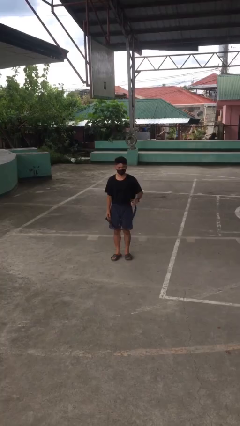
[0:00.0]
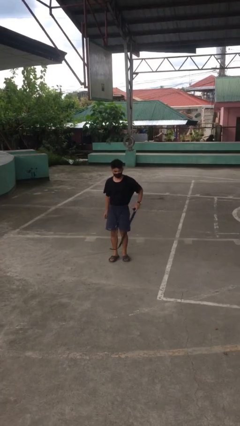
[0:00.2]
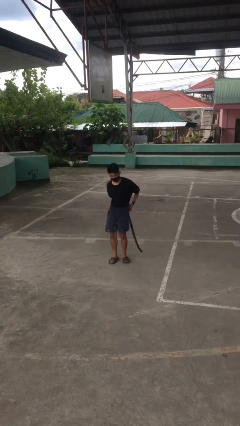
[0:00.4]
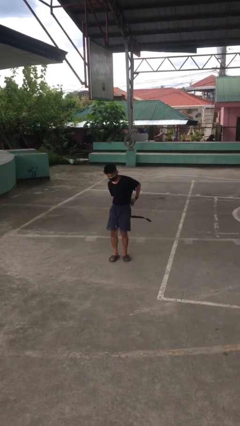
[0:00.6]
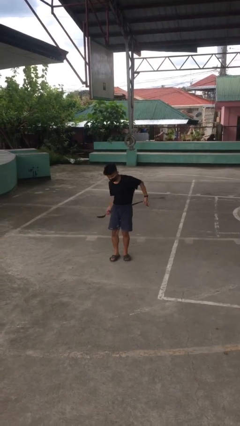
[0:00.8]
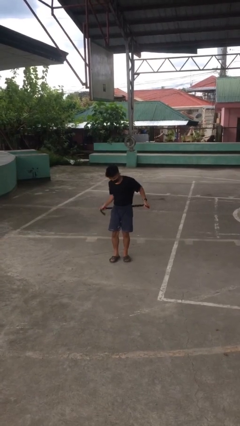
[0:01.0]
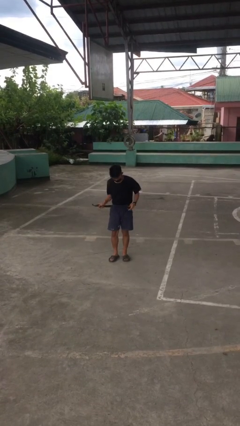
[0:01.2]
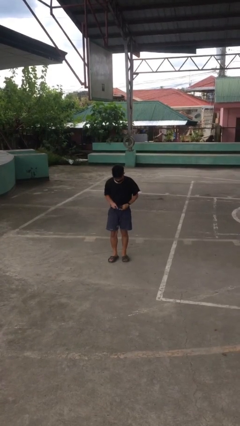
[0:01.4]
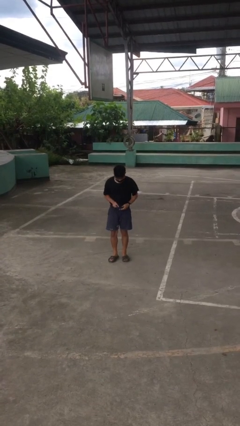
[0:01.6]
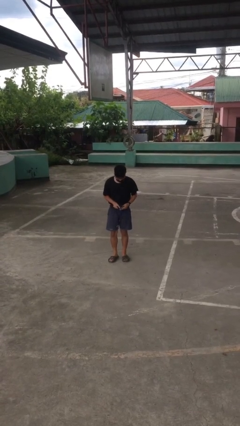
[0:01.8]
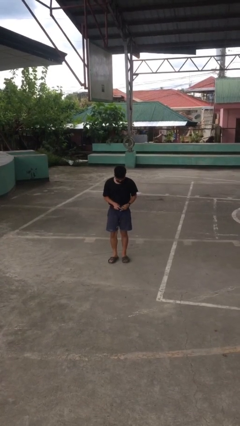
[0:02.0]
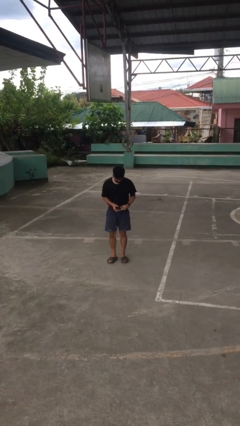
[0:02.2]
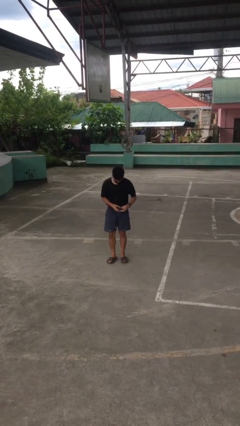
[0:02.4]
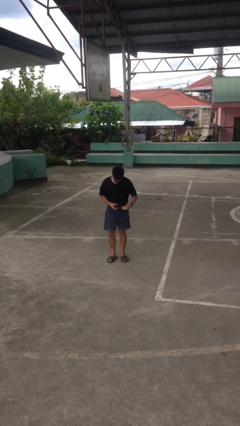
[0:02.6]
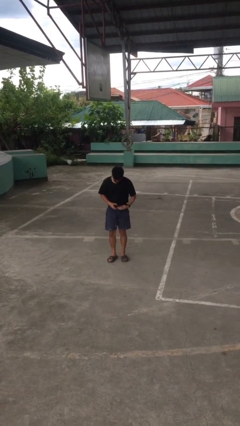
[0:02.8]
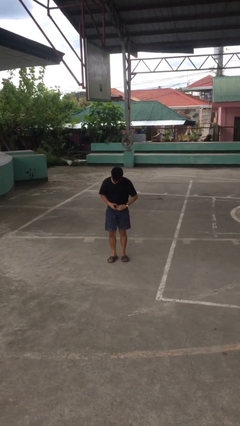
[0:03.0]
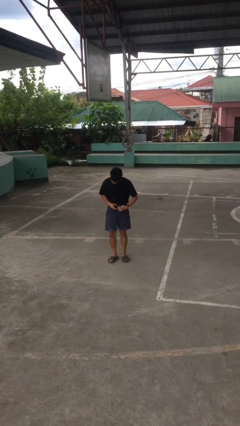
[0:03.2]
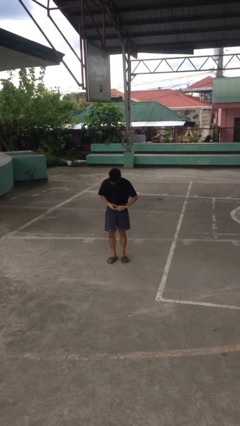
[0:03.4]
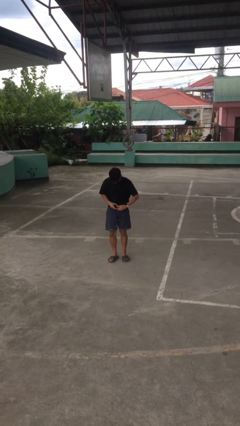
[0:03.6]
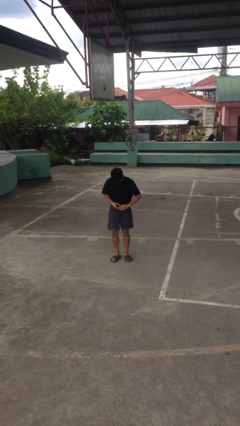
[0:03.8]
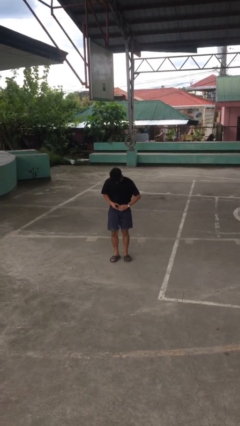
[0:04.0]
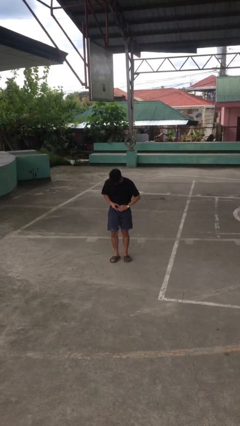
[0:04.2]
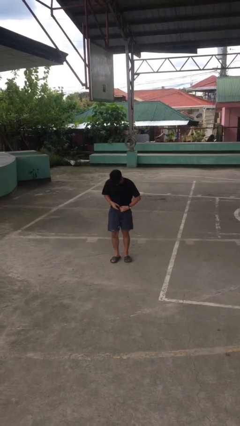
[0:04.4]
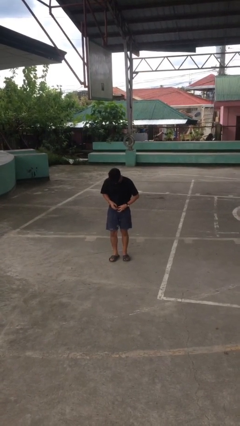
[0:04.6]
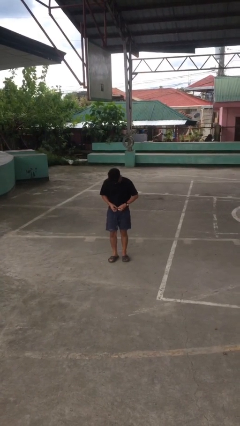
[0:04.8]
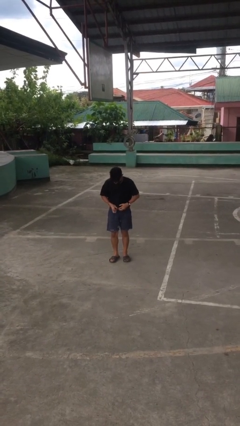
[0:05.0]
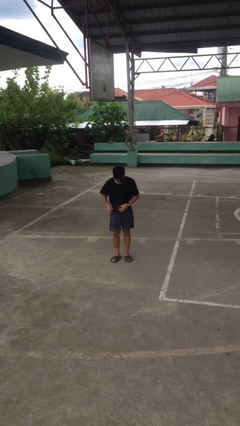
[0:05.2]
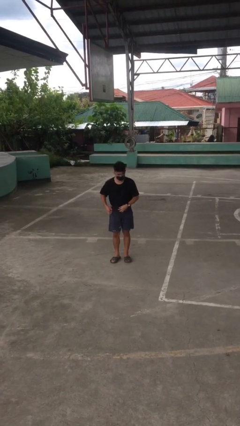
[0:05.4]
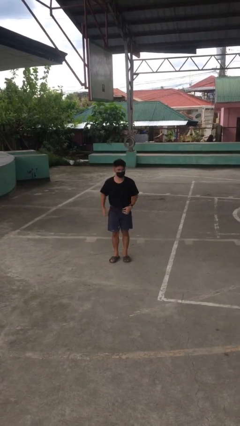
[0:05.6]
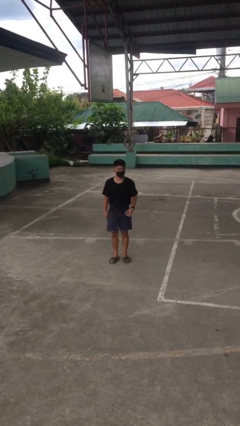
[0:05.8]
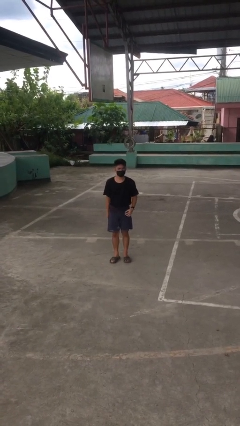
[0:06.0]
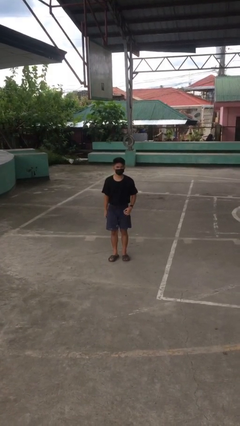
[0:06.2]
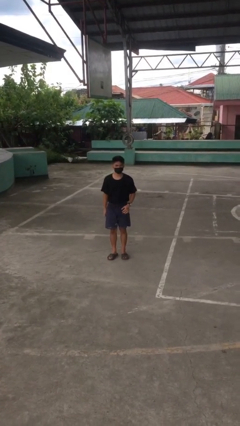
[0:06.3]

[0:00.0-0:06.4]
person puts on belt

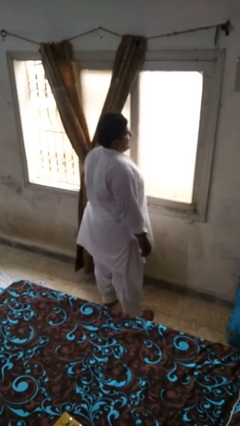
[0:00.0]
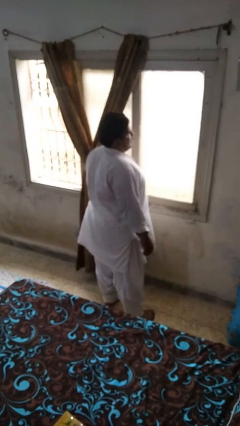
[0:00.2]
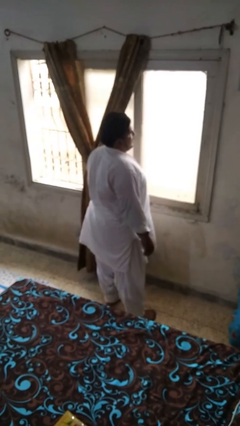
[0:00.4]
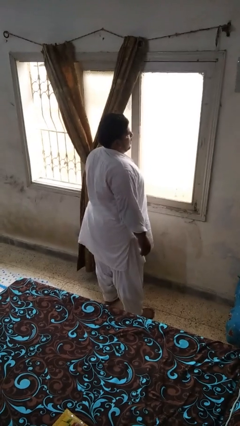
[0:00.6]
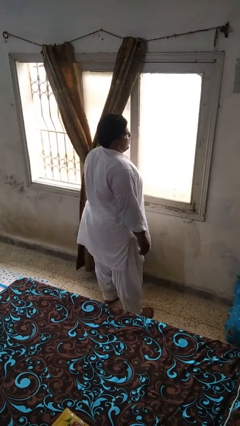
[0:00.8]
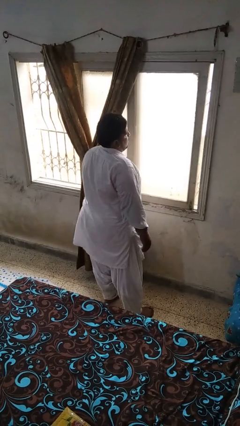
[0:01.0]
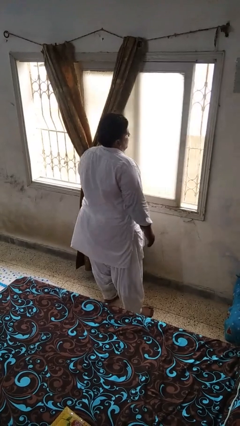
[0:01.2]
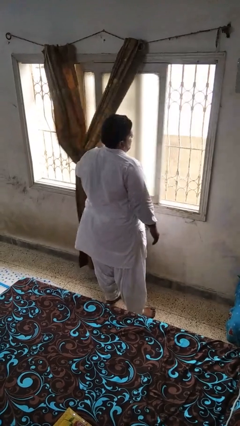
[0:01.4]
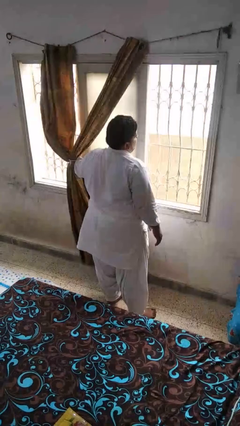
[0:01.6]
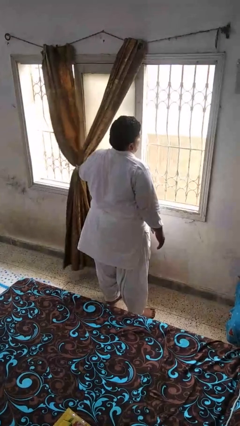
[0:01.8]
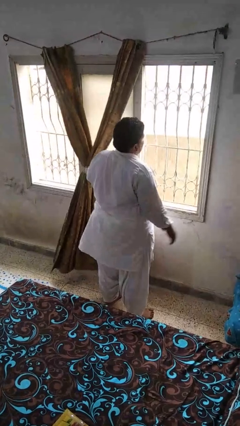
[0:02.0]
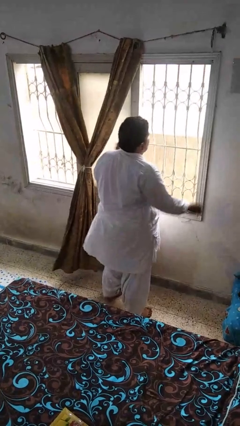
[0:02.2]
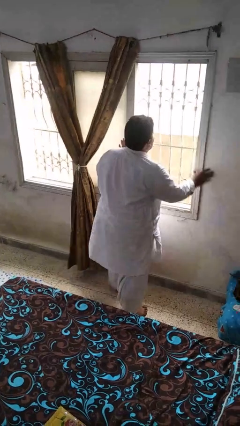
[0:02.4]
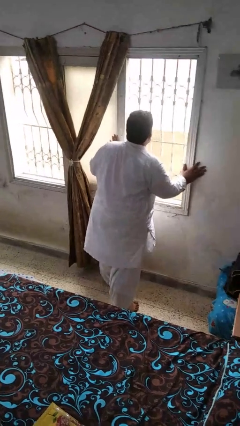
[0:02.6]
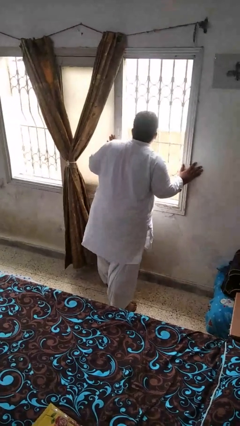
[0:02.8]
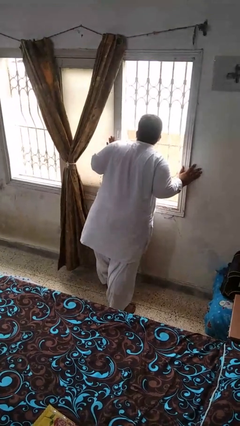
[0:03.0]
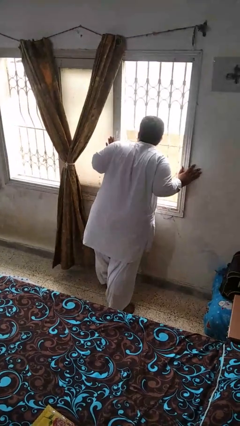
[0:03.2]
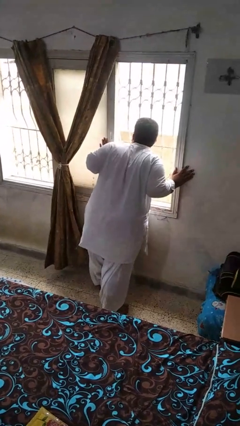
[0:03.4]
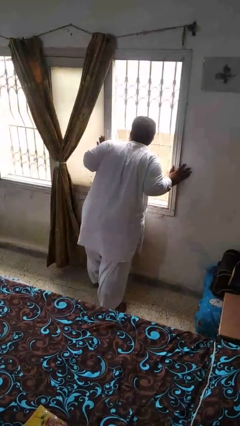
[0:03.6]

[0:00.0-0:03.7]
person opens home window

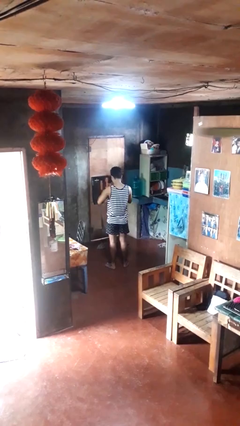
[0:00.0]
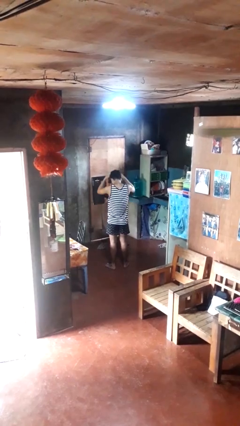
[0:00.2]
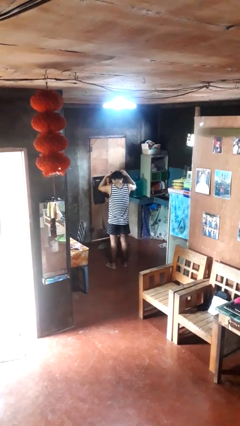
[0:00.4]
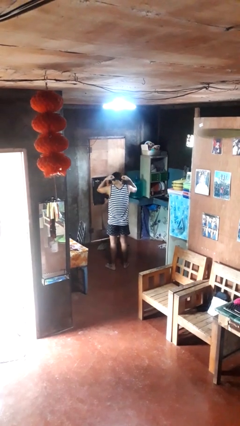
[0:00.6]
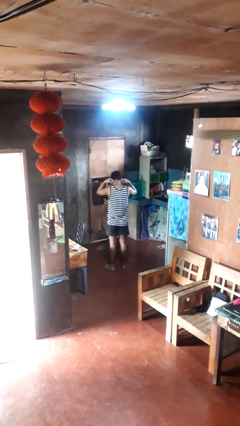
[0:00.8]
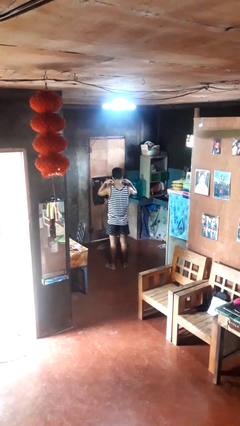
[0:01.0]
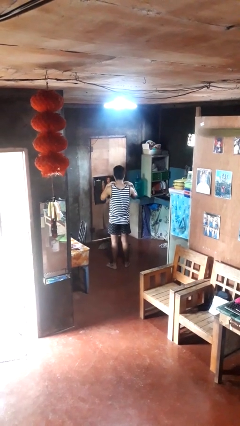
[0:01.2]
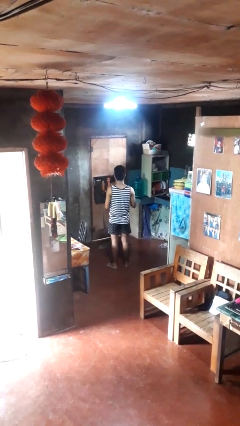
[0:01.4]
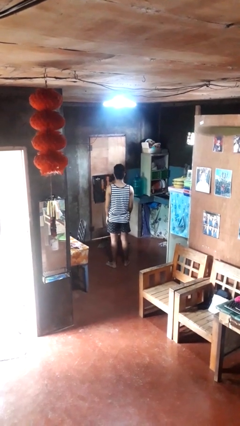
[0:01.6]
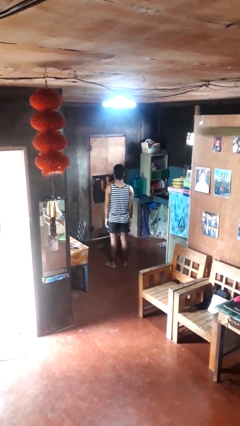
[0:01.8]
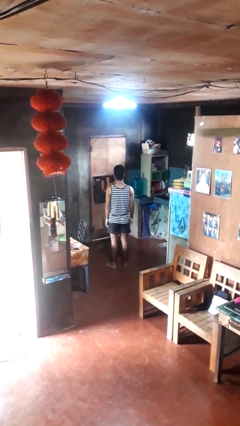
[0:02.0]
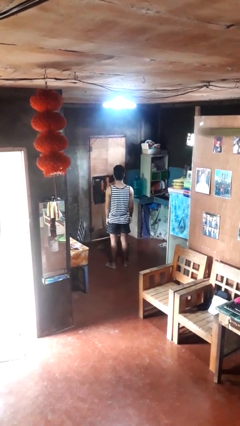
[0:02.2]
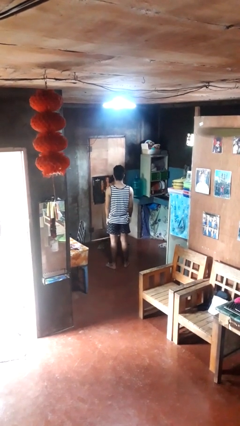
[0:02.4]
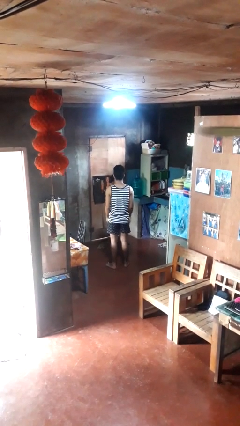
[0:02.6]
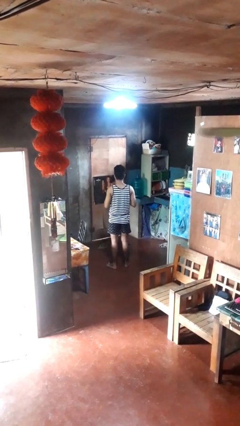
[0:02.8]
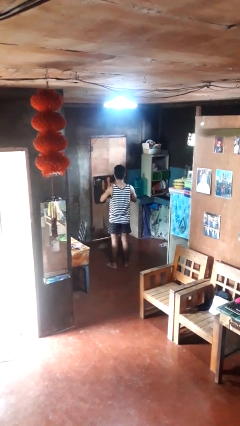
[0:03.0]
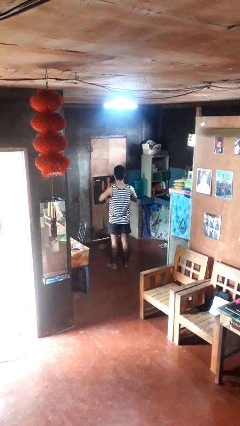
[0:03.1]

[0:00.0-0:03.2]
person puts on necklace

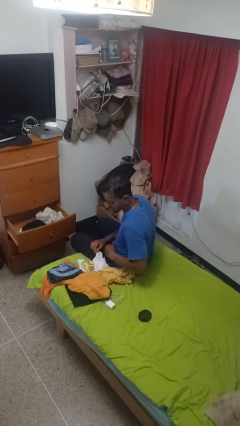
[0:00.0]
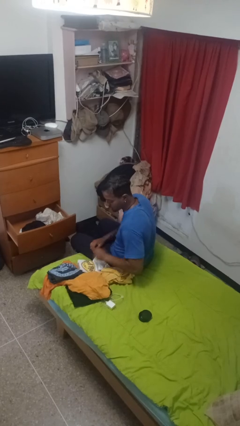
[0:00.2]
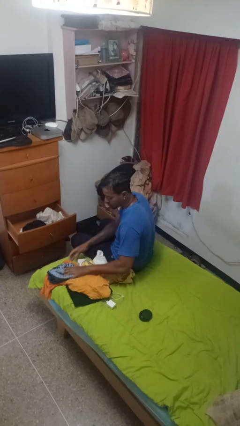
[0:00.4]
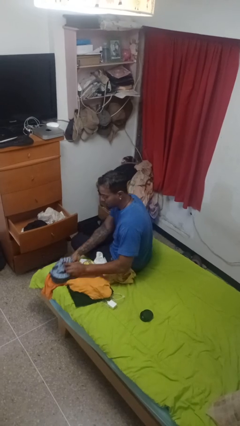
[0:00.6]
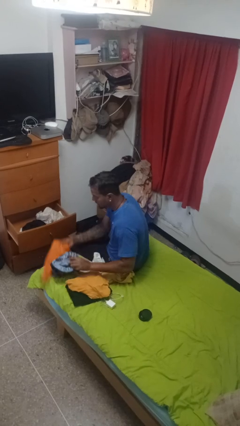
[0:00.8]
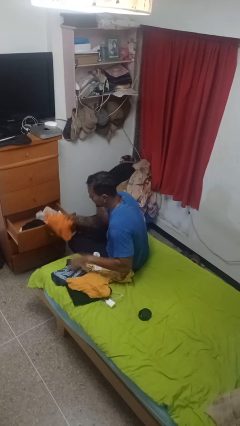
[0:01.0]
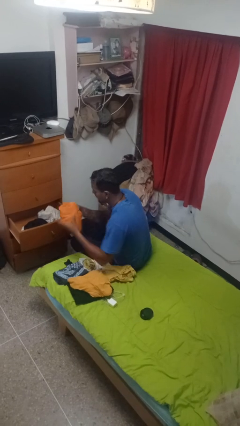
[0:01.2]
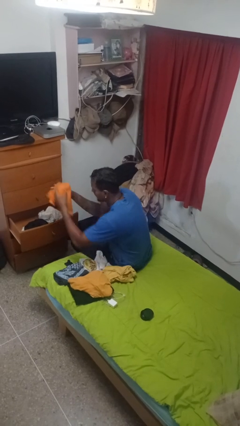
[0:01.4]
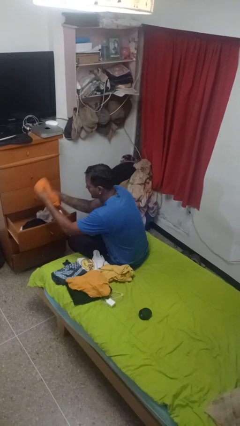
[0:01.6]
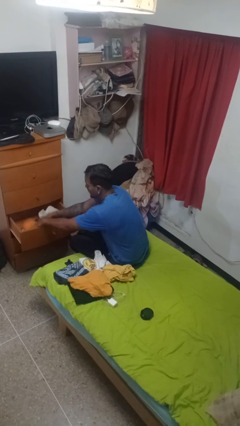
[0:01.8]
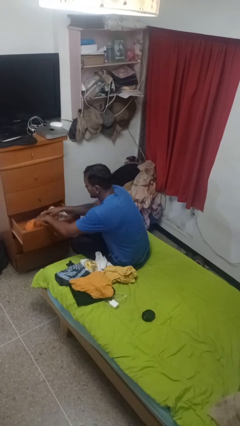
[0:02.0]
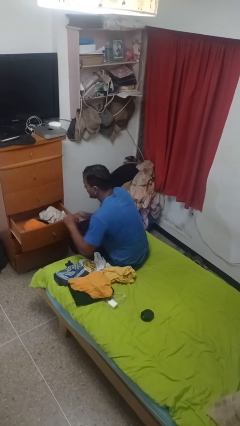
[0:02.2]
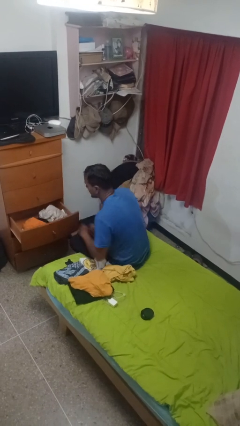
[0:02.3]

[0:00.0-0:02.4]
person puts clothes into dresser

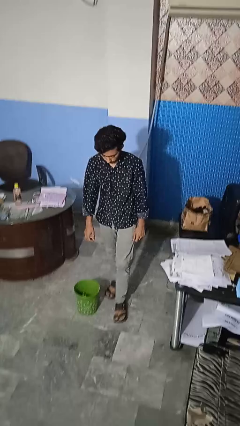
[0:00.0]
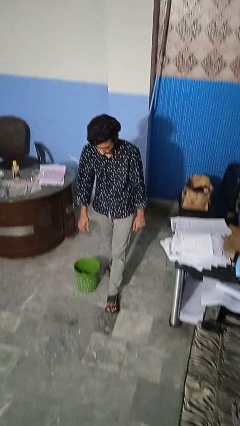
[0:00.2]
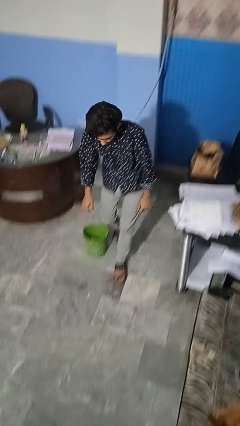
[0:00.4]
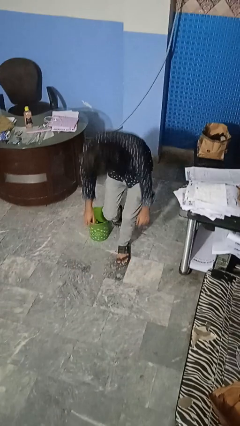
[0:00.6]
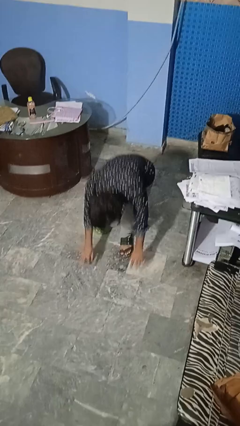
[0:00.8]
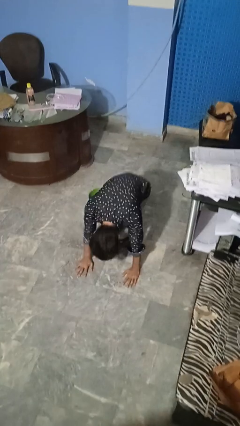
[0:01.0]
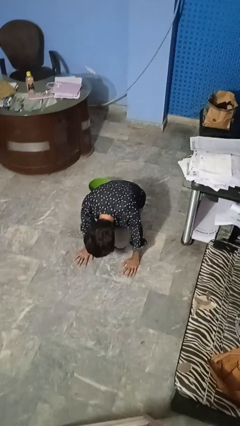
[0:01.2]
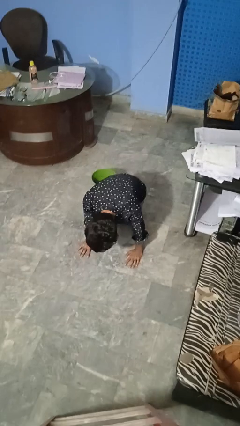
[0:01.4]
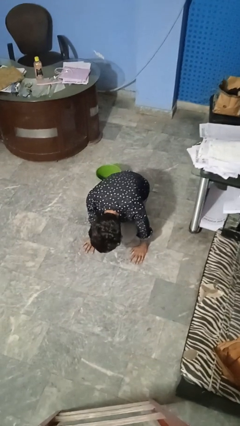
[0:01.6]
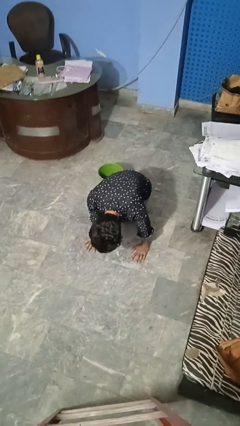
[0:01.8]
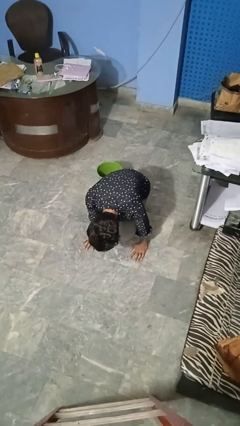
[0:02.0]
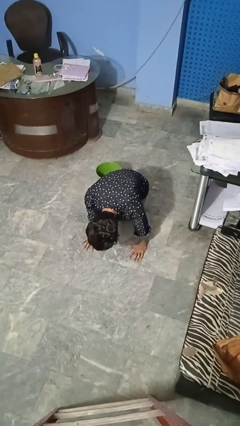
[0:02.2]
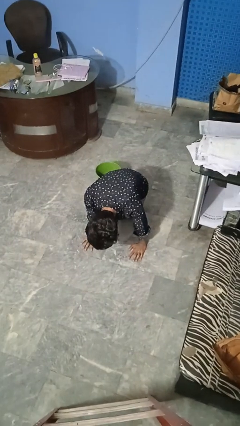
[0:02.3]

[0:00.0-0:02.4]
person trips on object on floor
